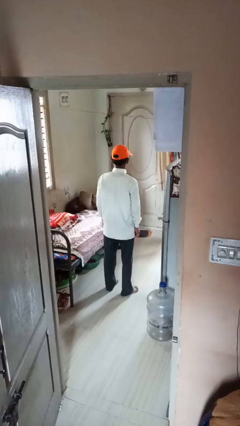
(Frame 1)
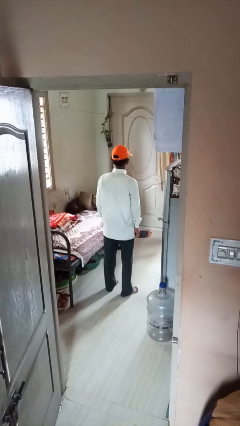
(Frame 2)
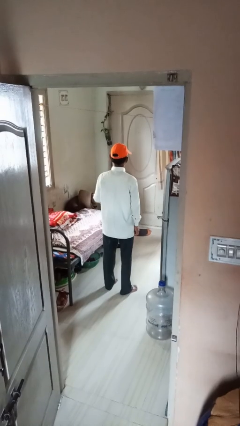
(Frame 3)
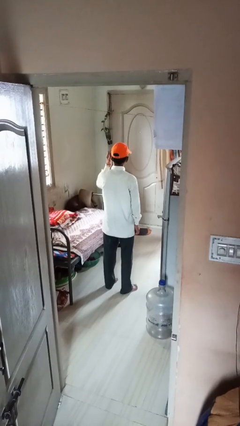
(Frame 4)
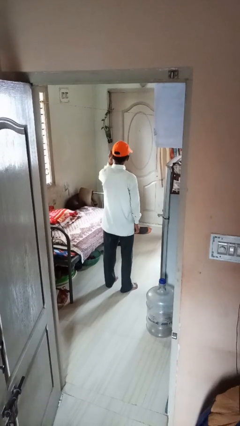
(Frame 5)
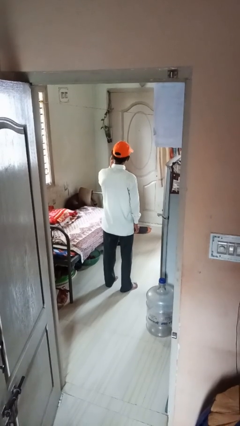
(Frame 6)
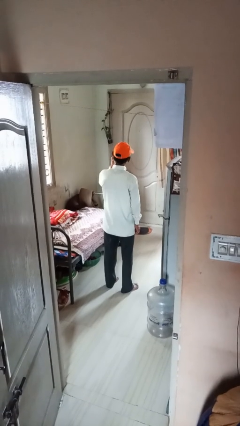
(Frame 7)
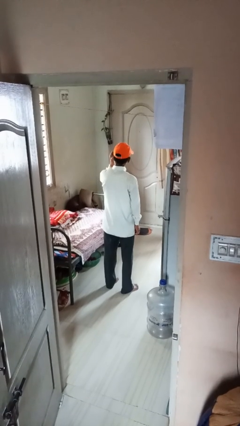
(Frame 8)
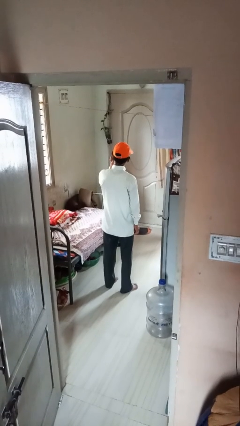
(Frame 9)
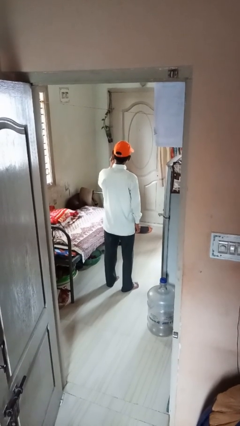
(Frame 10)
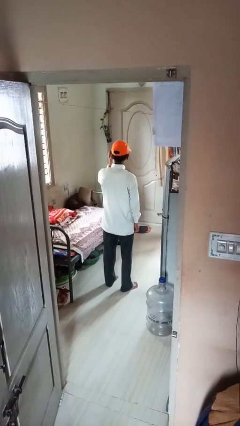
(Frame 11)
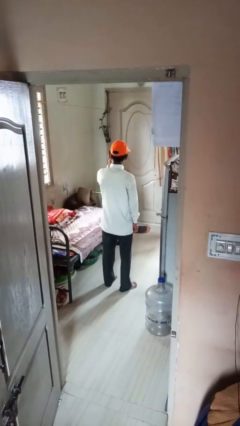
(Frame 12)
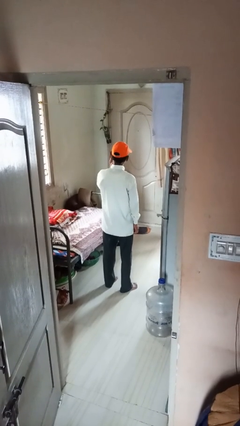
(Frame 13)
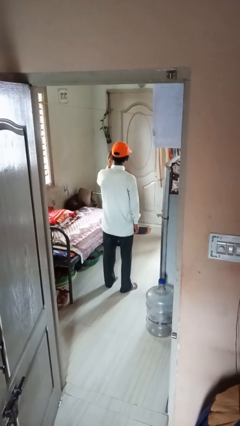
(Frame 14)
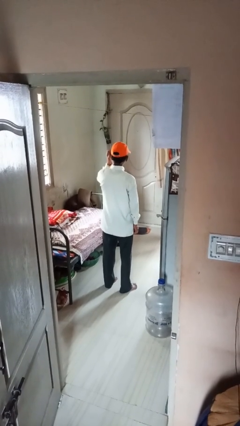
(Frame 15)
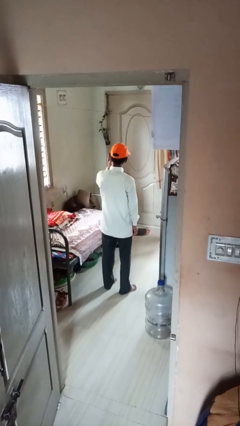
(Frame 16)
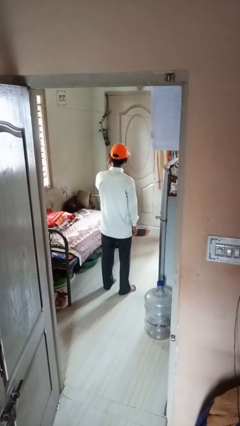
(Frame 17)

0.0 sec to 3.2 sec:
person scratches face

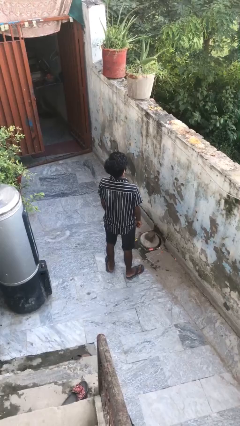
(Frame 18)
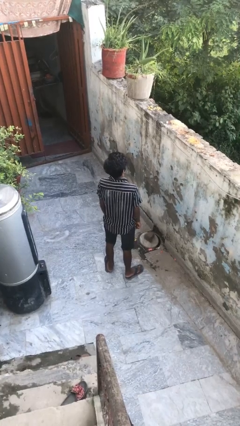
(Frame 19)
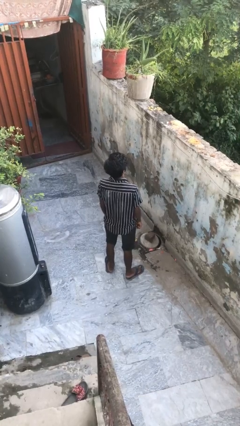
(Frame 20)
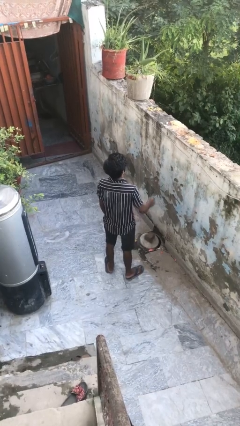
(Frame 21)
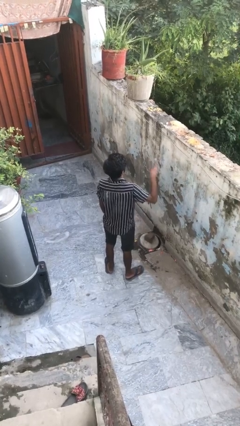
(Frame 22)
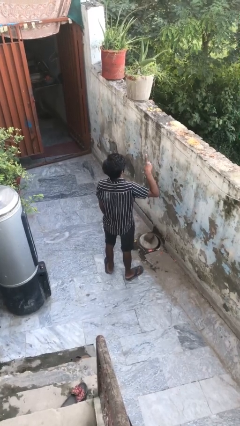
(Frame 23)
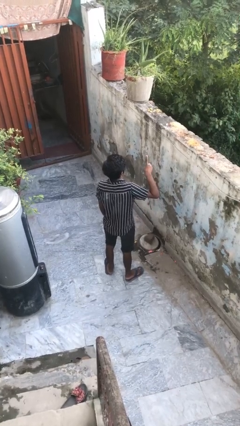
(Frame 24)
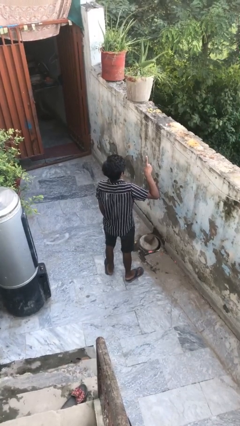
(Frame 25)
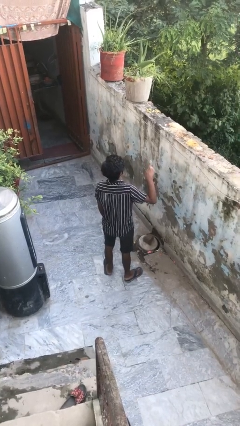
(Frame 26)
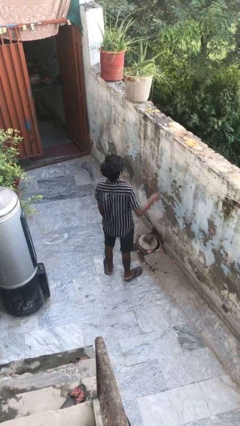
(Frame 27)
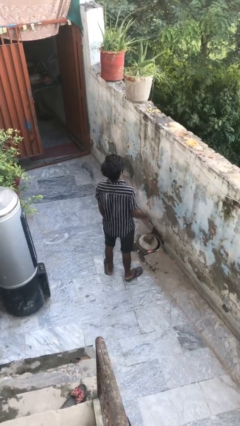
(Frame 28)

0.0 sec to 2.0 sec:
person gestures number one

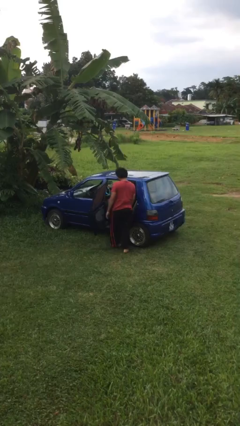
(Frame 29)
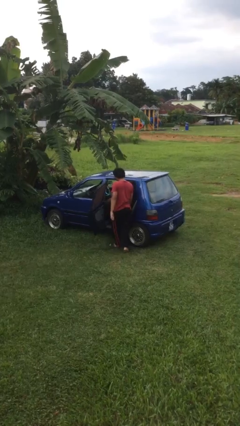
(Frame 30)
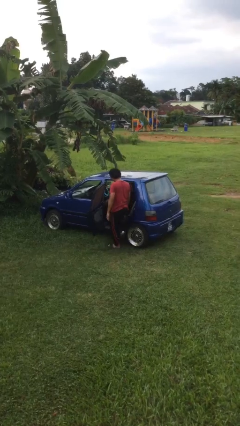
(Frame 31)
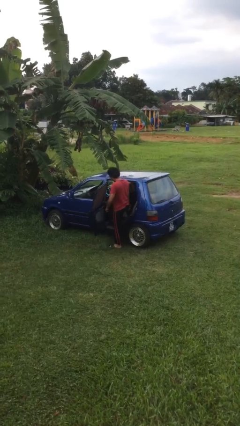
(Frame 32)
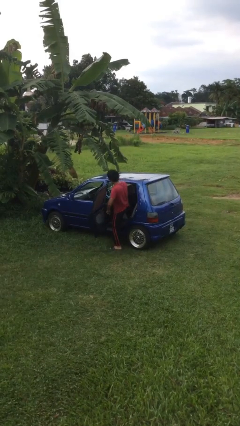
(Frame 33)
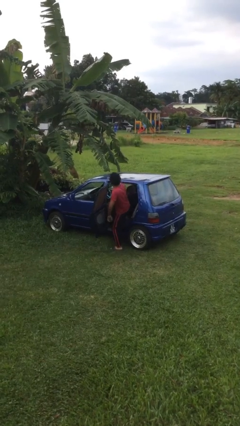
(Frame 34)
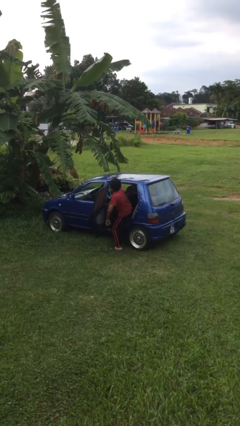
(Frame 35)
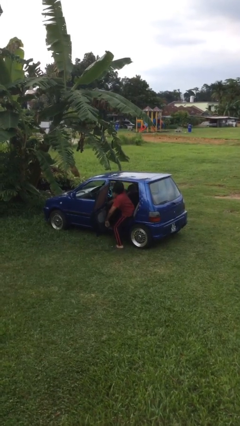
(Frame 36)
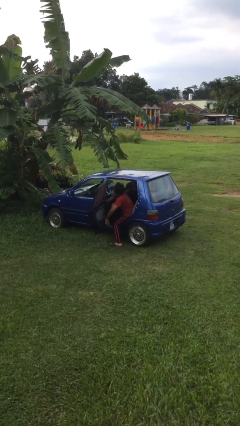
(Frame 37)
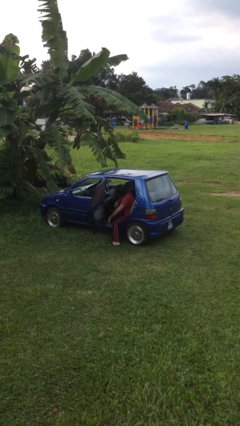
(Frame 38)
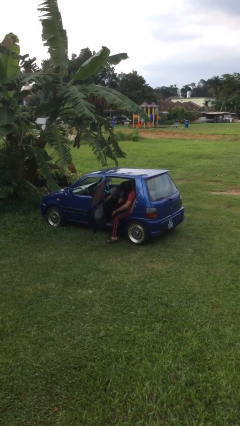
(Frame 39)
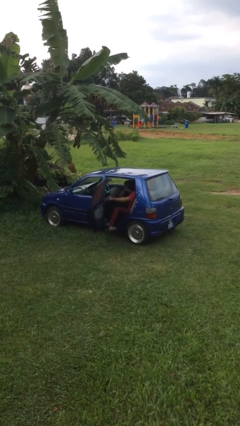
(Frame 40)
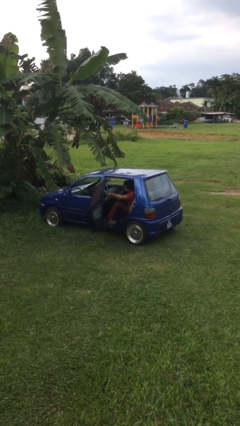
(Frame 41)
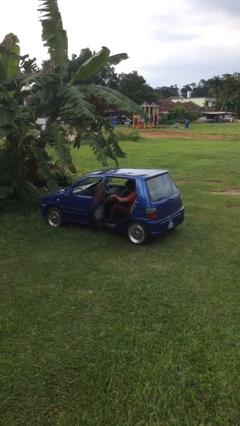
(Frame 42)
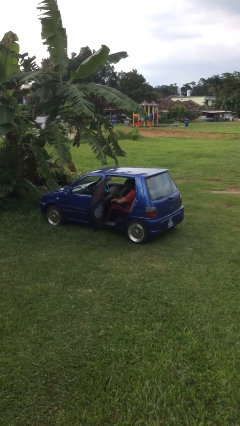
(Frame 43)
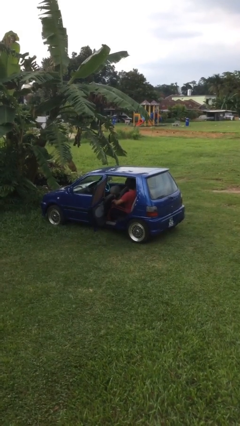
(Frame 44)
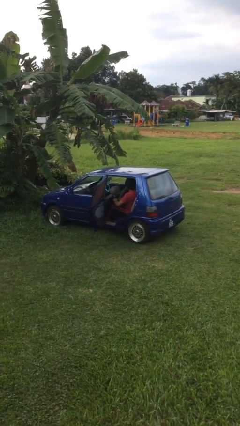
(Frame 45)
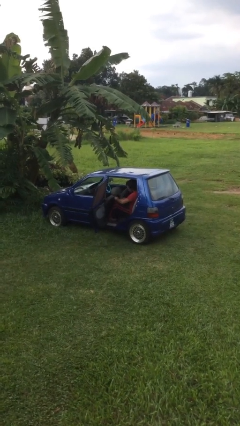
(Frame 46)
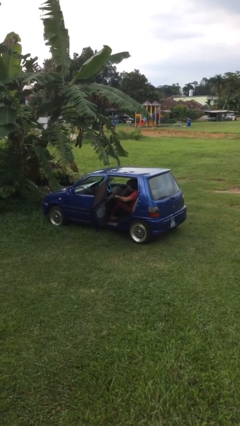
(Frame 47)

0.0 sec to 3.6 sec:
person enters car

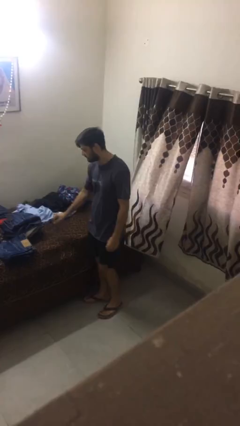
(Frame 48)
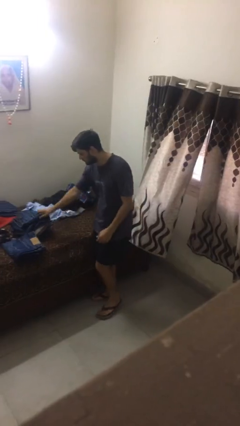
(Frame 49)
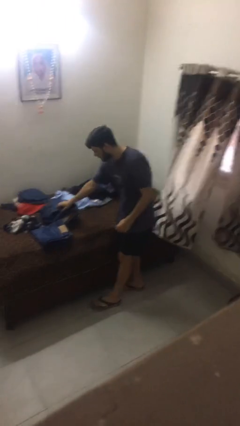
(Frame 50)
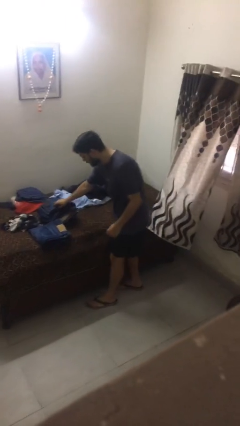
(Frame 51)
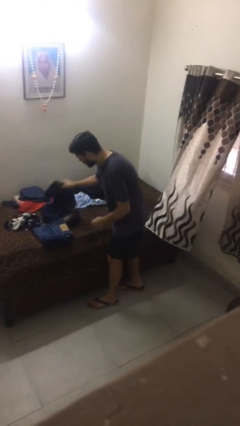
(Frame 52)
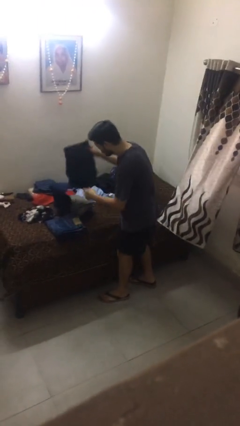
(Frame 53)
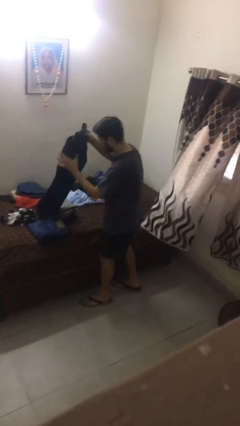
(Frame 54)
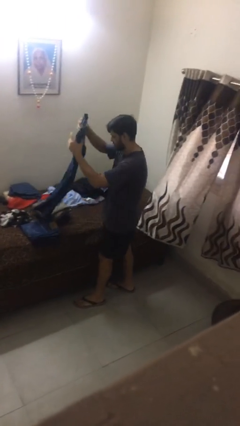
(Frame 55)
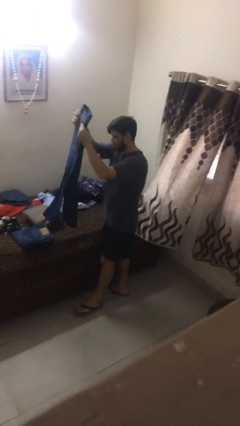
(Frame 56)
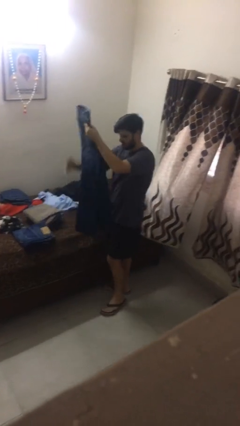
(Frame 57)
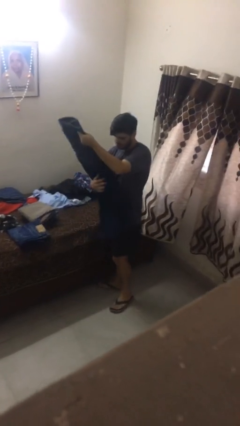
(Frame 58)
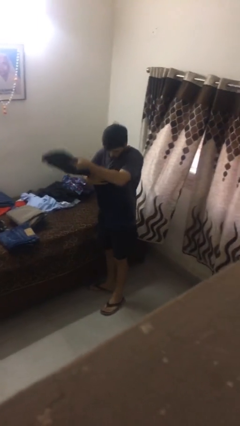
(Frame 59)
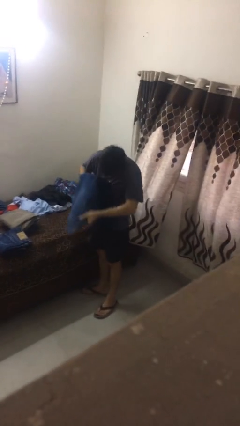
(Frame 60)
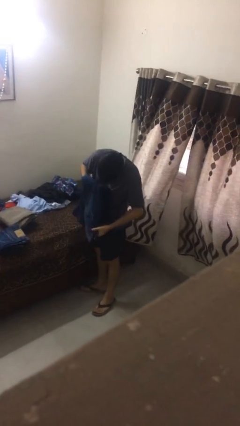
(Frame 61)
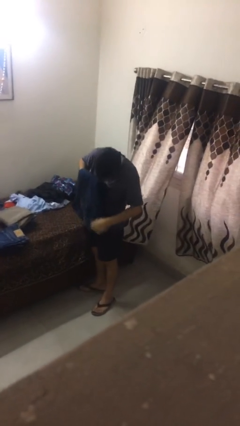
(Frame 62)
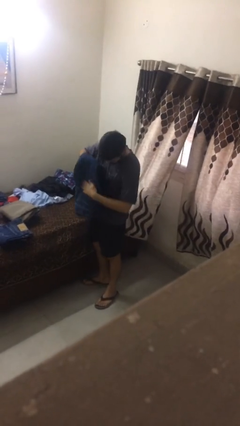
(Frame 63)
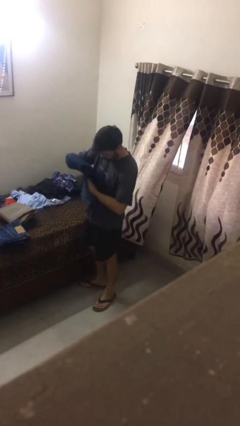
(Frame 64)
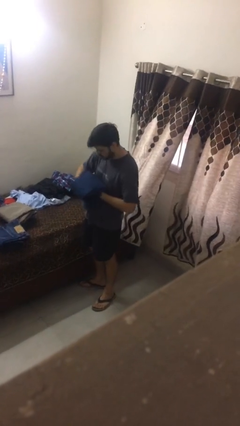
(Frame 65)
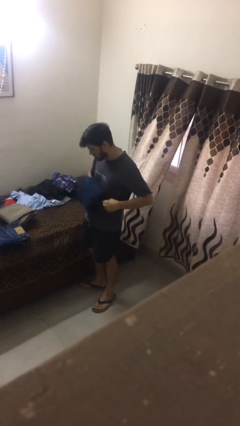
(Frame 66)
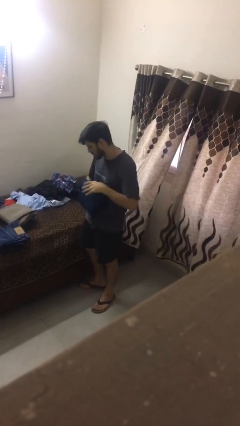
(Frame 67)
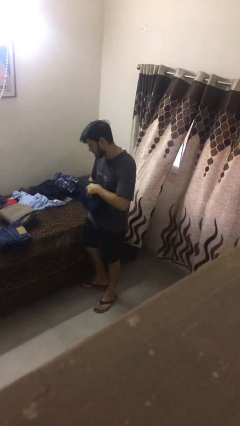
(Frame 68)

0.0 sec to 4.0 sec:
person folds pants

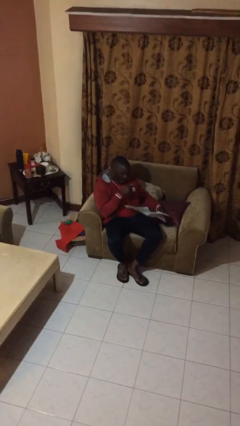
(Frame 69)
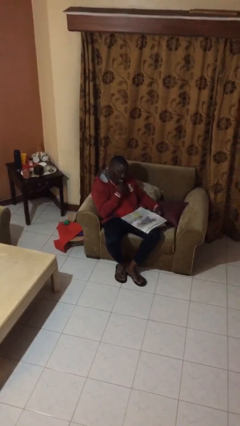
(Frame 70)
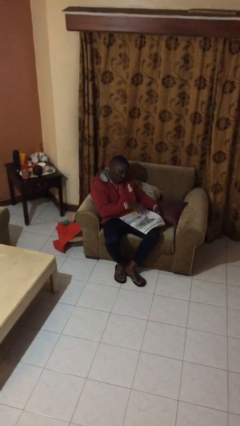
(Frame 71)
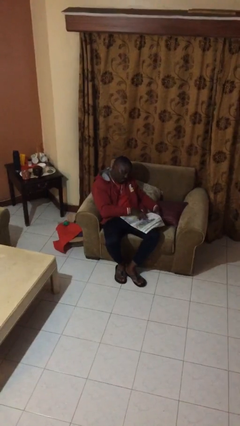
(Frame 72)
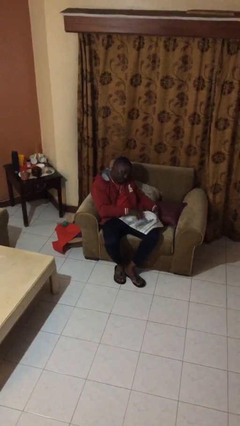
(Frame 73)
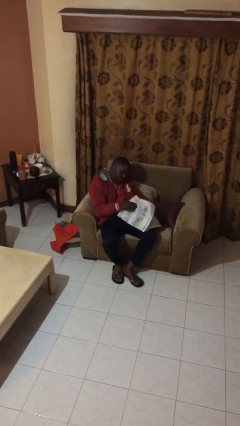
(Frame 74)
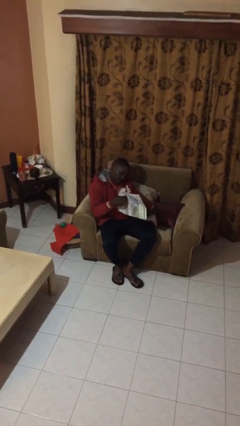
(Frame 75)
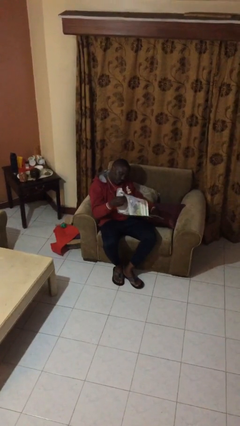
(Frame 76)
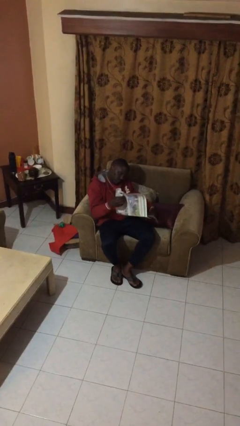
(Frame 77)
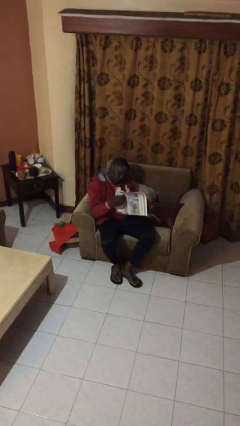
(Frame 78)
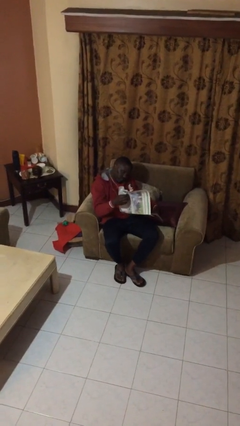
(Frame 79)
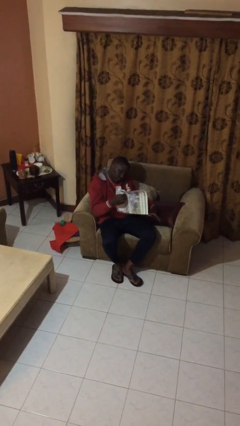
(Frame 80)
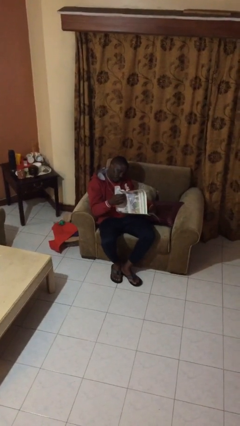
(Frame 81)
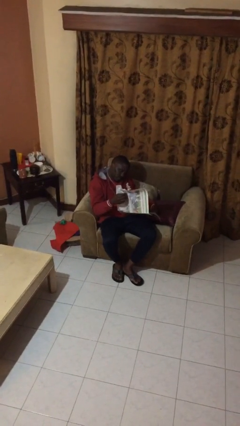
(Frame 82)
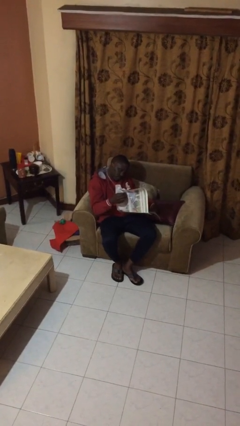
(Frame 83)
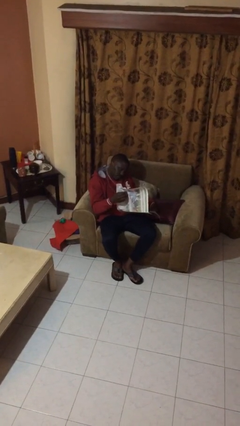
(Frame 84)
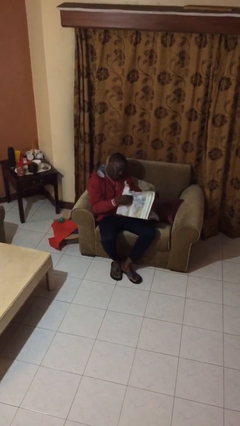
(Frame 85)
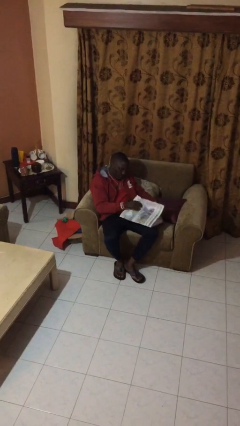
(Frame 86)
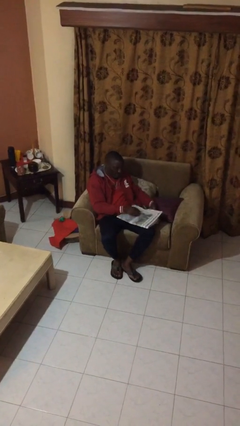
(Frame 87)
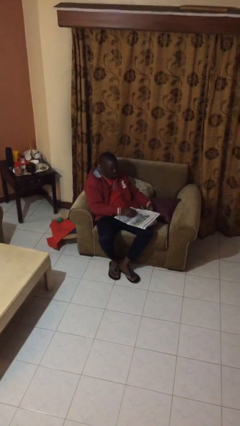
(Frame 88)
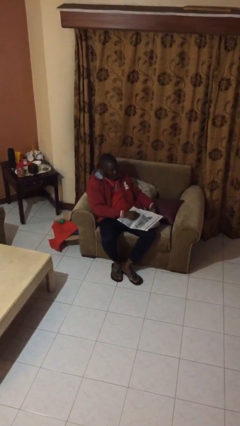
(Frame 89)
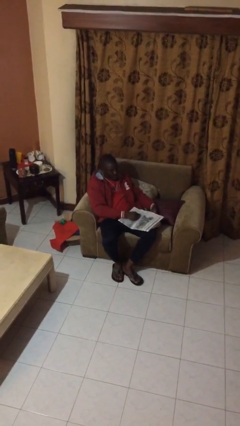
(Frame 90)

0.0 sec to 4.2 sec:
person reads newspaper

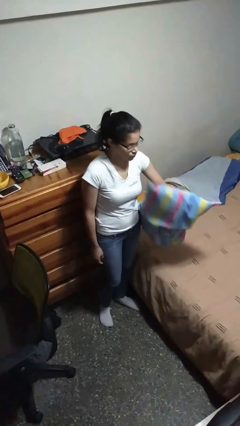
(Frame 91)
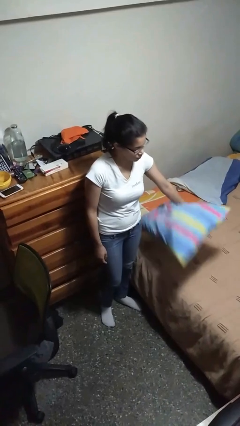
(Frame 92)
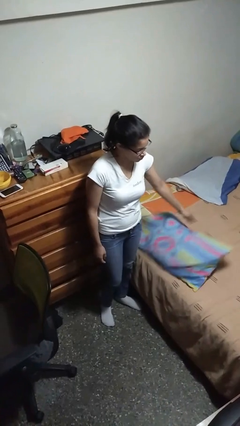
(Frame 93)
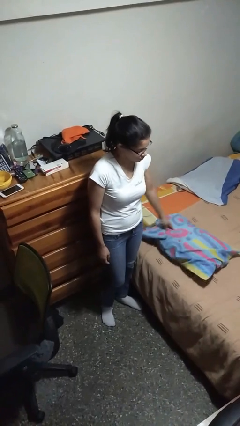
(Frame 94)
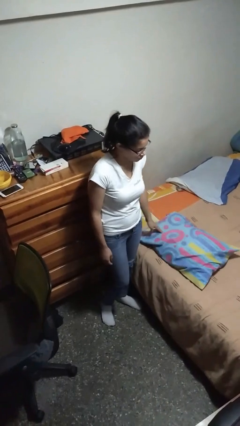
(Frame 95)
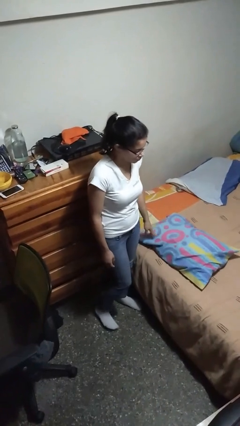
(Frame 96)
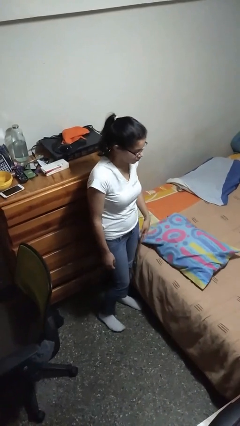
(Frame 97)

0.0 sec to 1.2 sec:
person puts down object on bed
